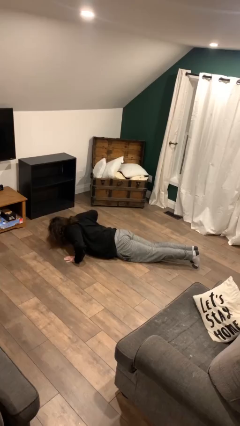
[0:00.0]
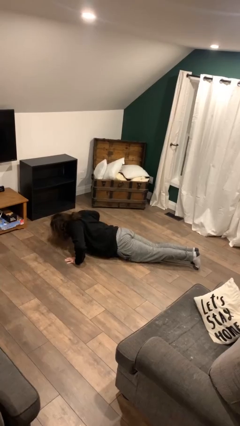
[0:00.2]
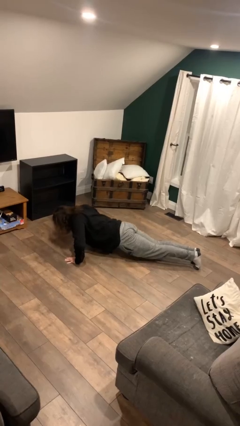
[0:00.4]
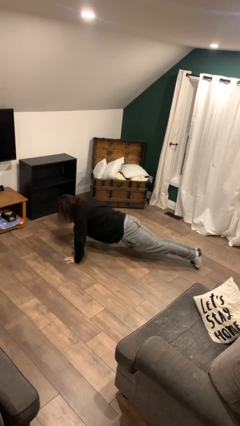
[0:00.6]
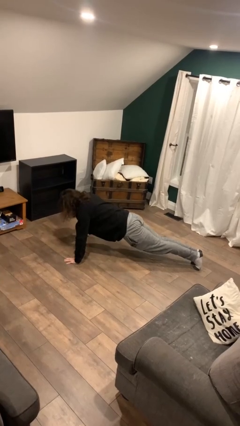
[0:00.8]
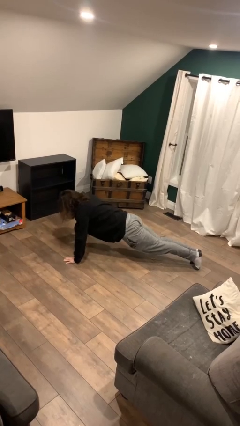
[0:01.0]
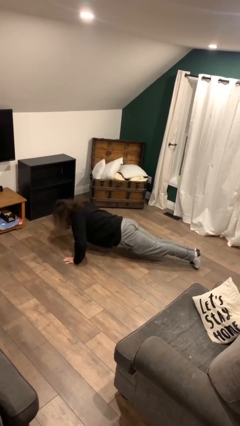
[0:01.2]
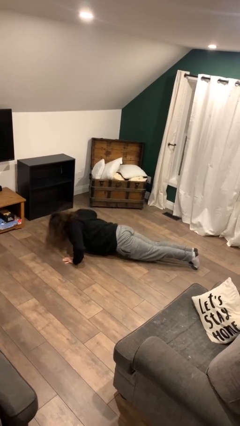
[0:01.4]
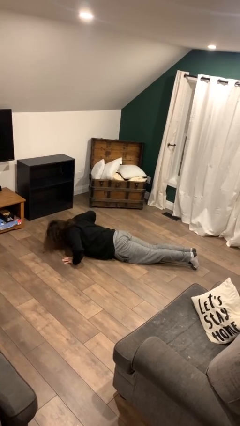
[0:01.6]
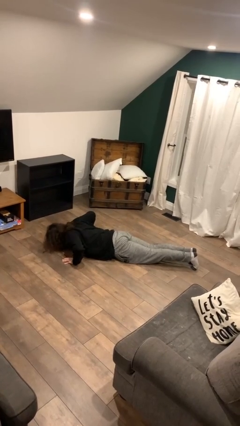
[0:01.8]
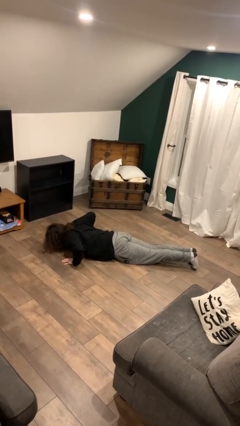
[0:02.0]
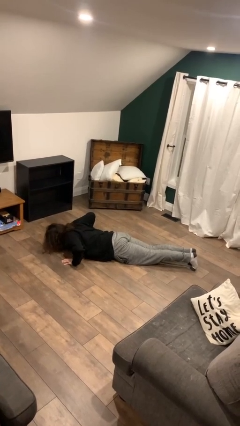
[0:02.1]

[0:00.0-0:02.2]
person exercises with pushup

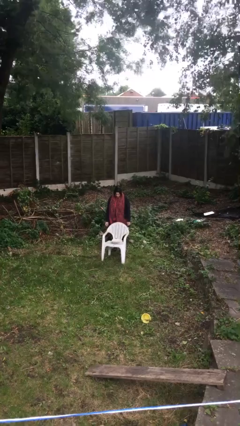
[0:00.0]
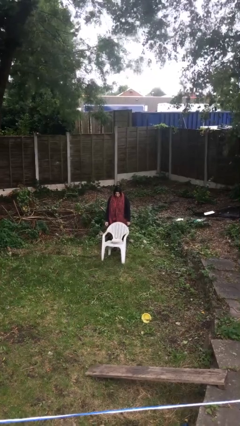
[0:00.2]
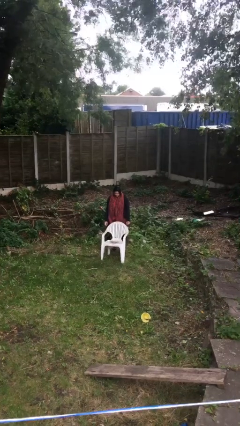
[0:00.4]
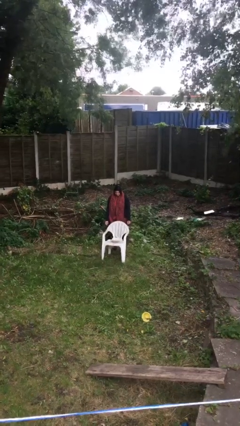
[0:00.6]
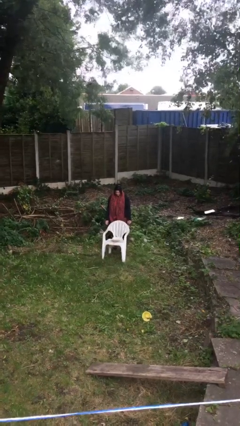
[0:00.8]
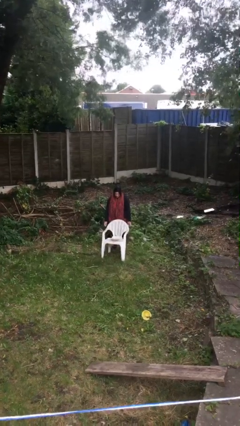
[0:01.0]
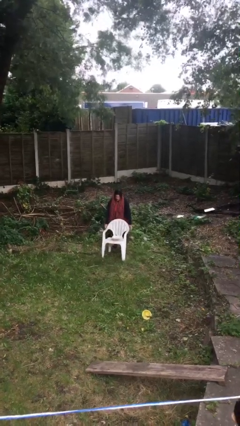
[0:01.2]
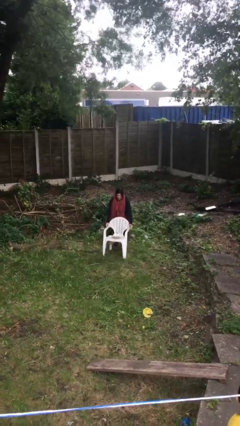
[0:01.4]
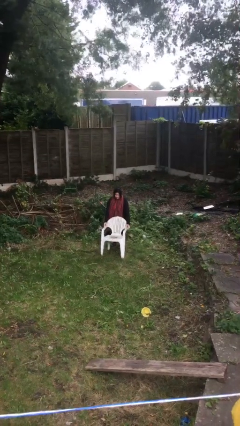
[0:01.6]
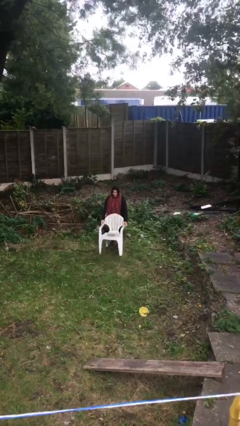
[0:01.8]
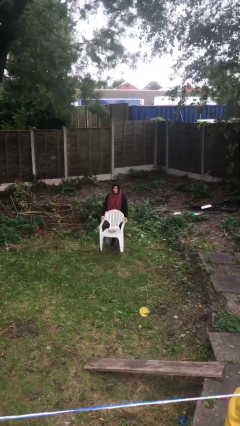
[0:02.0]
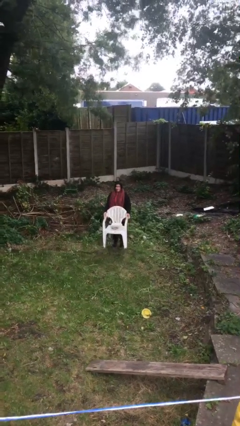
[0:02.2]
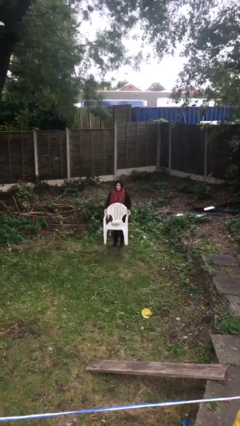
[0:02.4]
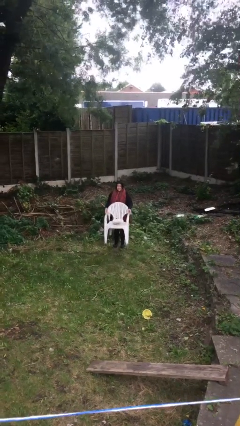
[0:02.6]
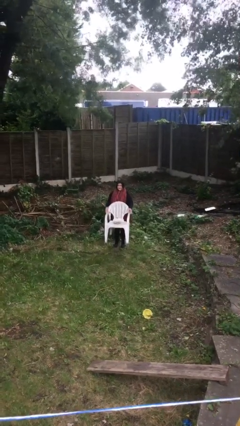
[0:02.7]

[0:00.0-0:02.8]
person picks up object from floor

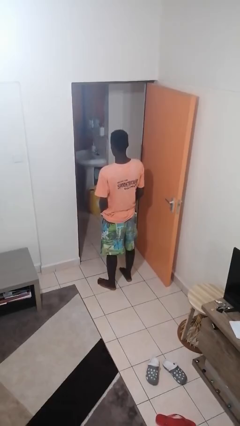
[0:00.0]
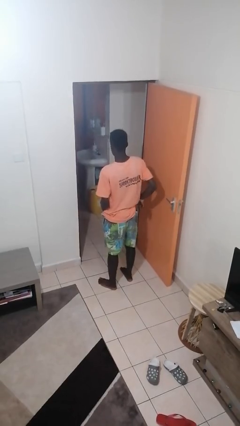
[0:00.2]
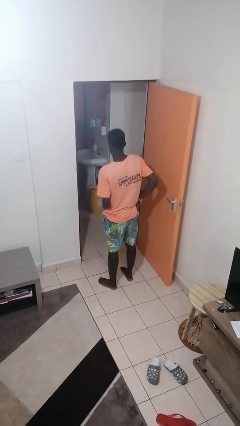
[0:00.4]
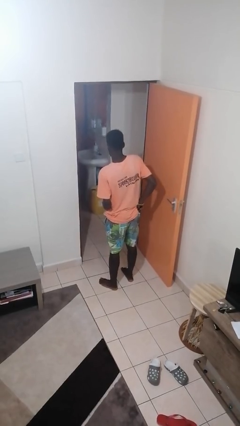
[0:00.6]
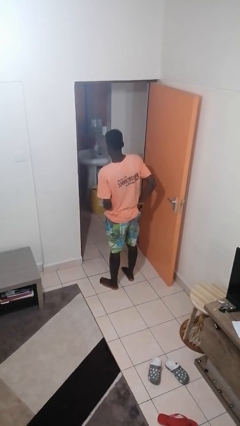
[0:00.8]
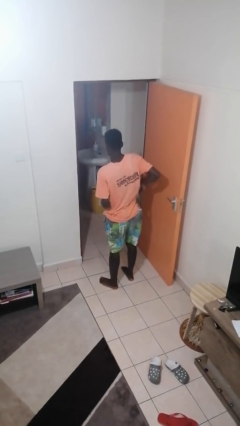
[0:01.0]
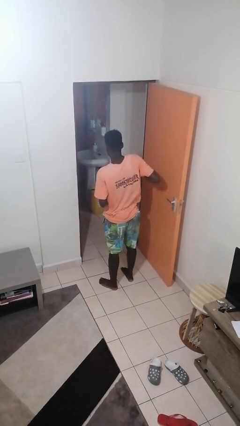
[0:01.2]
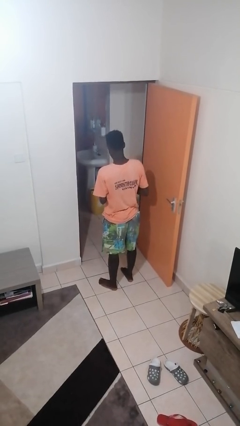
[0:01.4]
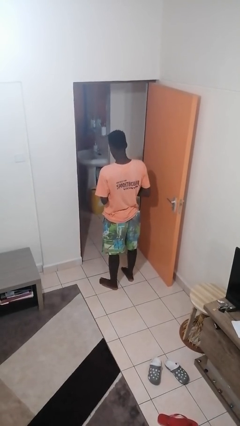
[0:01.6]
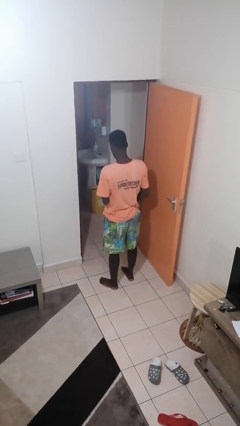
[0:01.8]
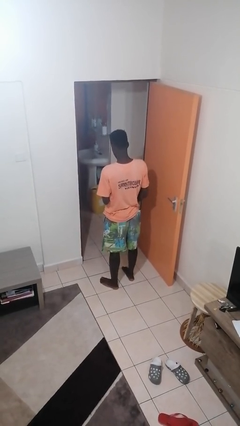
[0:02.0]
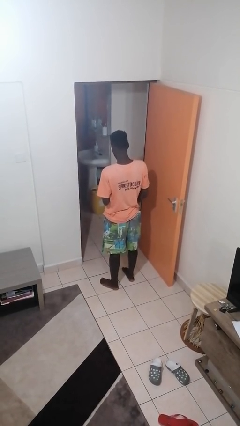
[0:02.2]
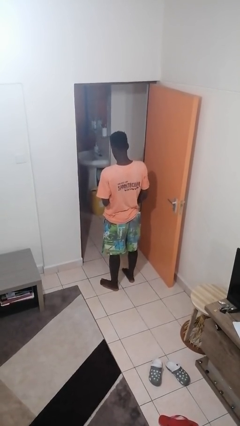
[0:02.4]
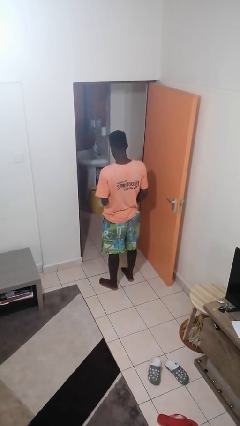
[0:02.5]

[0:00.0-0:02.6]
person takes phone from pocket

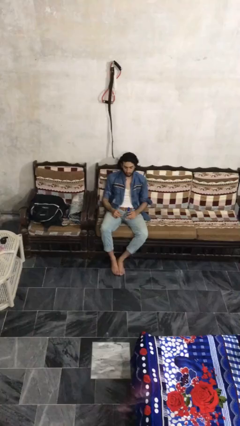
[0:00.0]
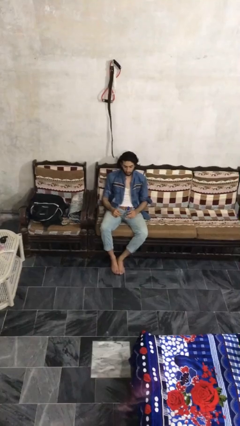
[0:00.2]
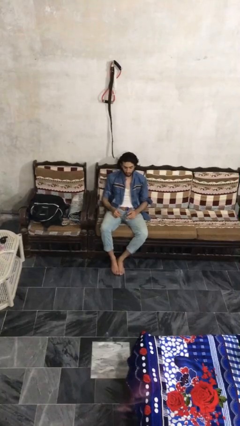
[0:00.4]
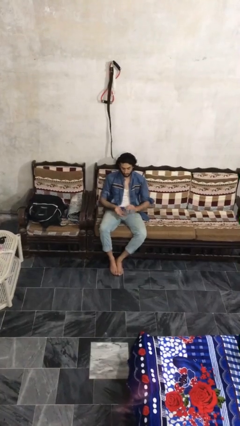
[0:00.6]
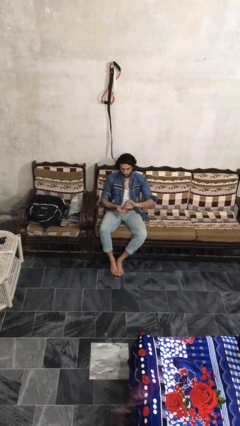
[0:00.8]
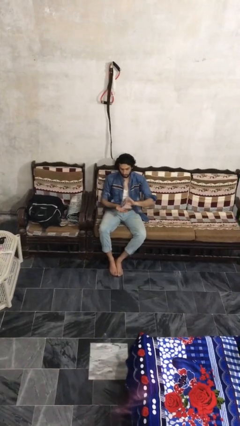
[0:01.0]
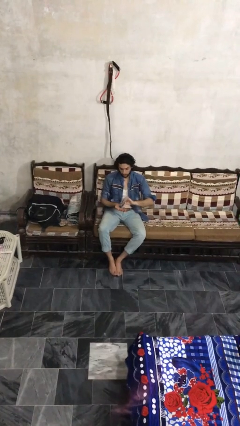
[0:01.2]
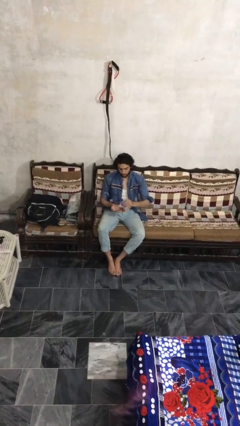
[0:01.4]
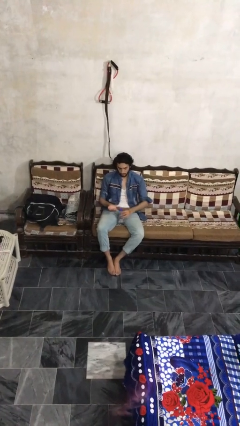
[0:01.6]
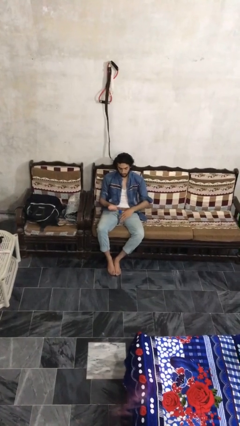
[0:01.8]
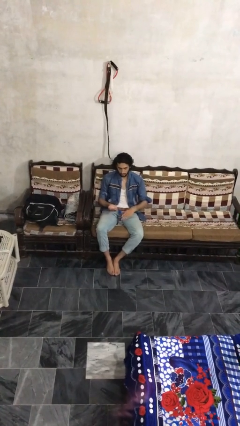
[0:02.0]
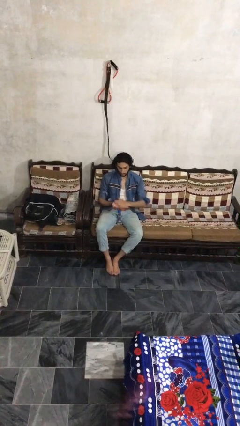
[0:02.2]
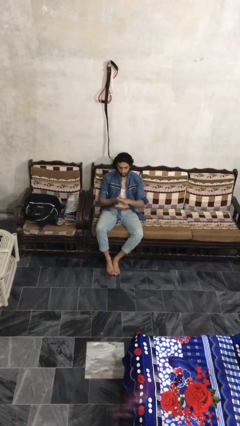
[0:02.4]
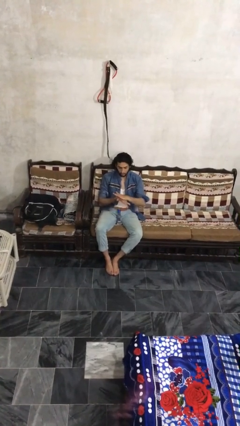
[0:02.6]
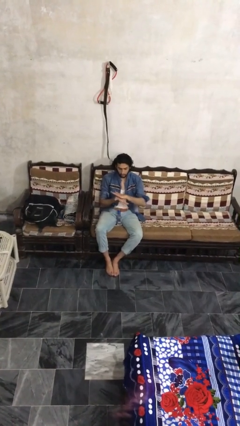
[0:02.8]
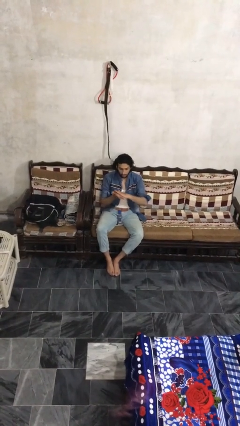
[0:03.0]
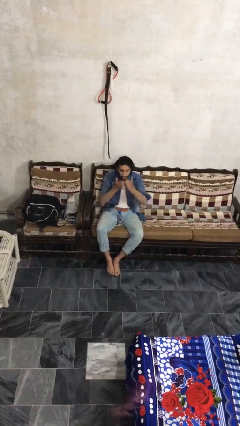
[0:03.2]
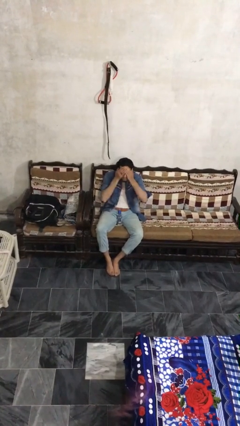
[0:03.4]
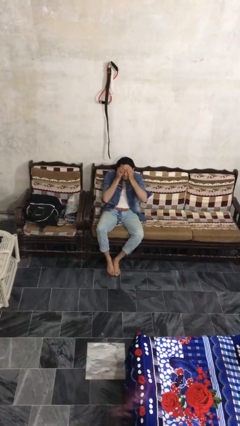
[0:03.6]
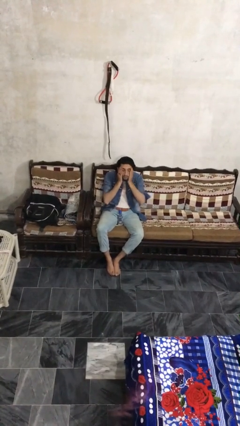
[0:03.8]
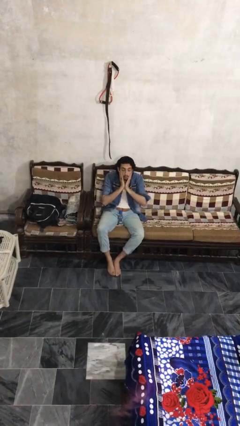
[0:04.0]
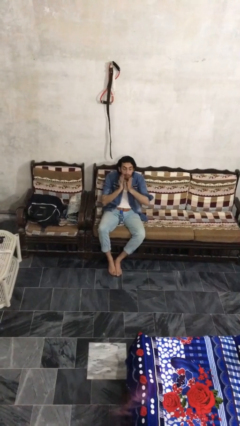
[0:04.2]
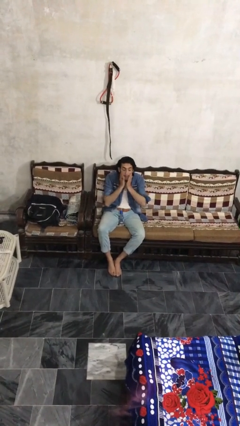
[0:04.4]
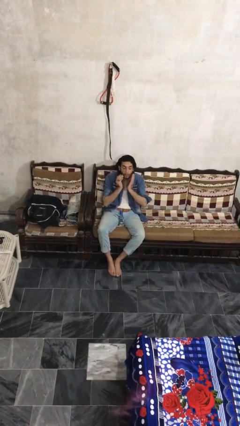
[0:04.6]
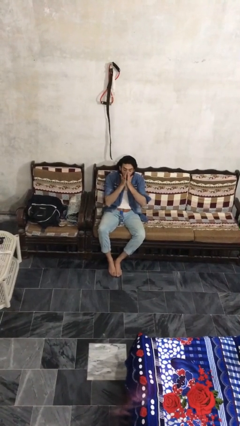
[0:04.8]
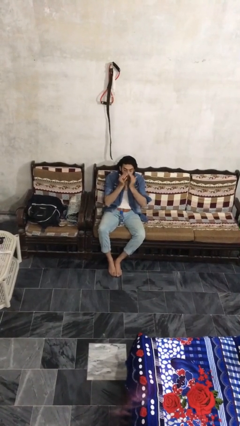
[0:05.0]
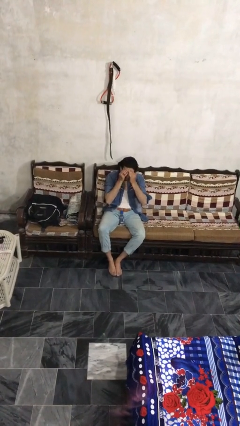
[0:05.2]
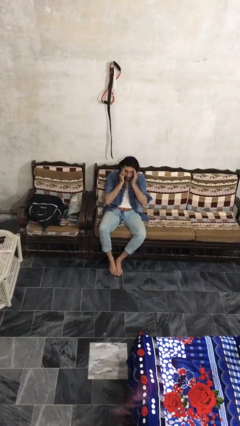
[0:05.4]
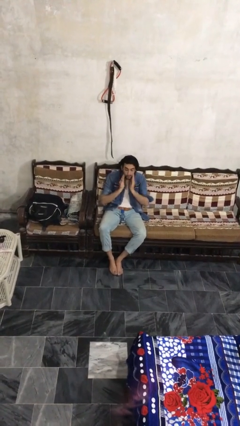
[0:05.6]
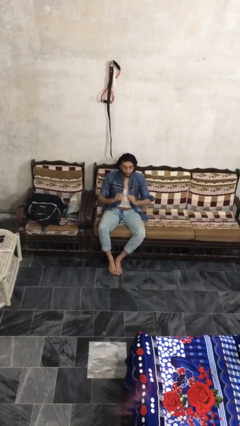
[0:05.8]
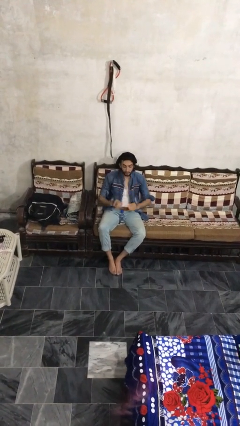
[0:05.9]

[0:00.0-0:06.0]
person applies facial moisturizer

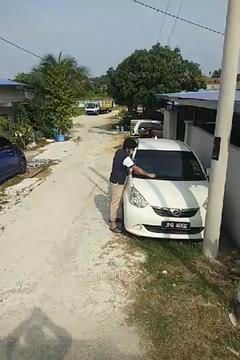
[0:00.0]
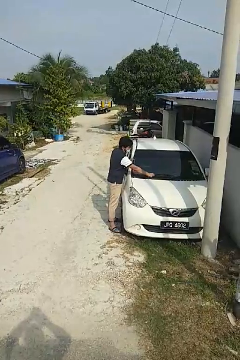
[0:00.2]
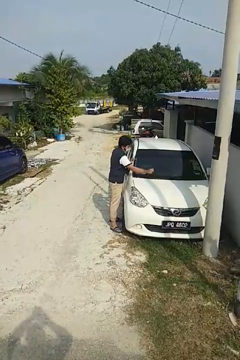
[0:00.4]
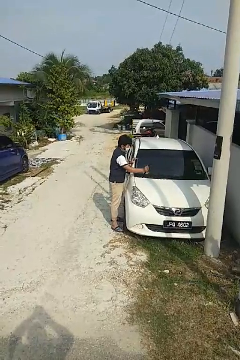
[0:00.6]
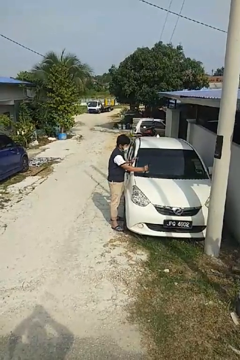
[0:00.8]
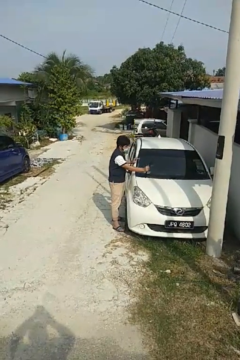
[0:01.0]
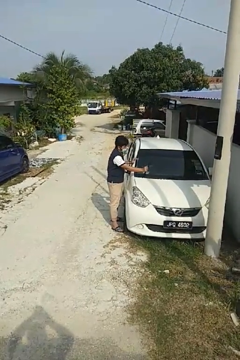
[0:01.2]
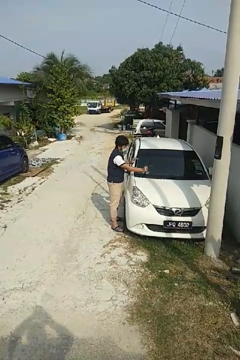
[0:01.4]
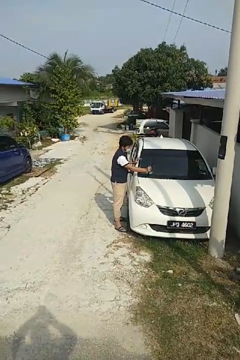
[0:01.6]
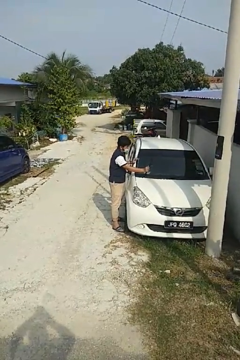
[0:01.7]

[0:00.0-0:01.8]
person flips up car wipers

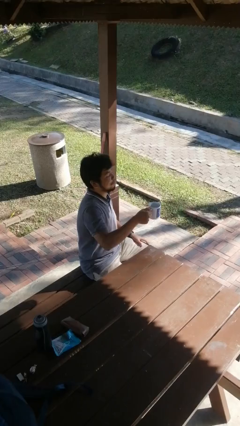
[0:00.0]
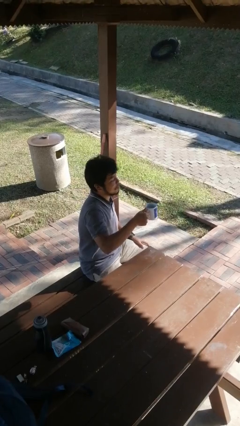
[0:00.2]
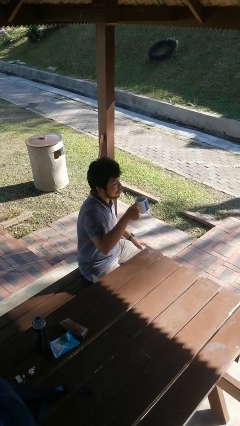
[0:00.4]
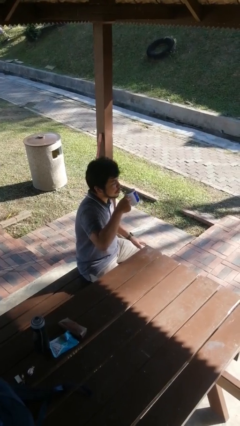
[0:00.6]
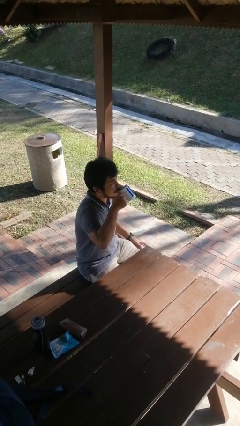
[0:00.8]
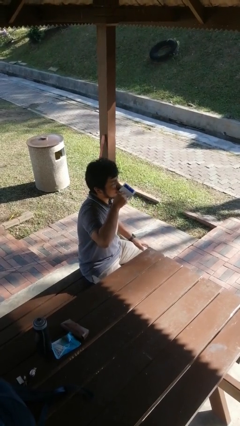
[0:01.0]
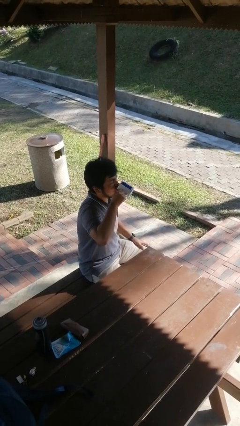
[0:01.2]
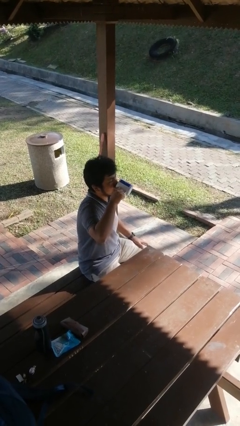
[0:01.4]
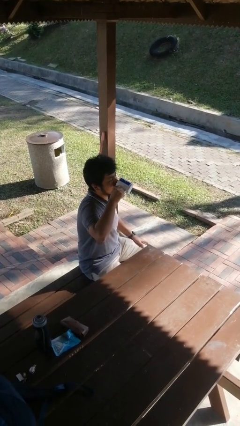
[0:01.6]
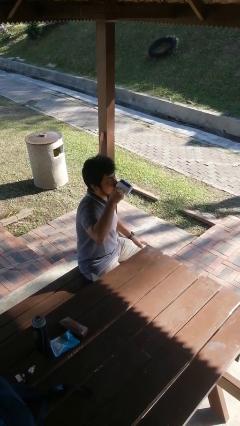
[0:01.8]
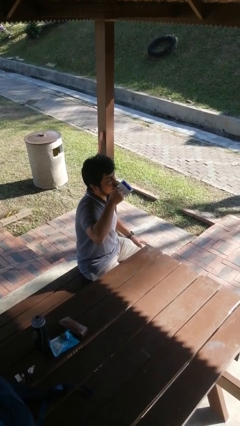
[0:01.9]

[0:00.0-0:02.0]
person drinks from mug
